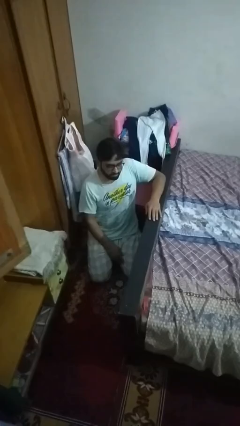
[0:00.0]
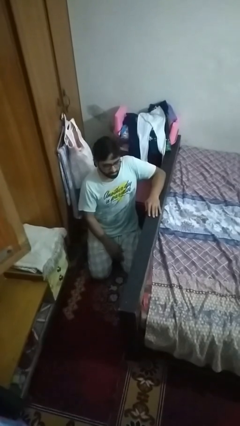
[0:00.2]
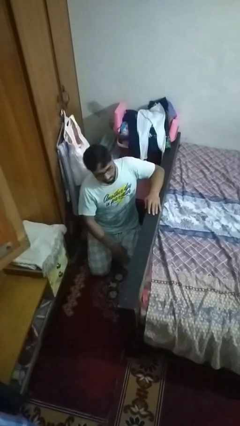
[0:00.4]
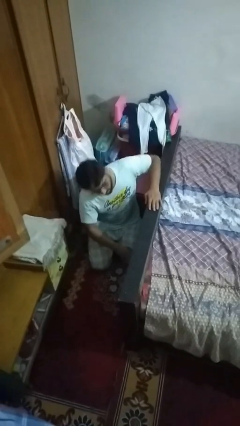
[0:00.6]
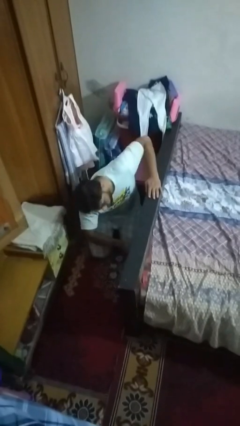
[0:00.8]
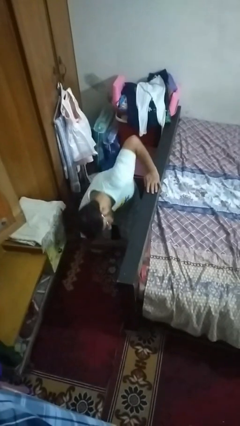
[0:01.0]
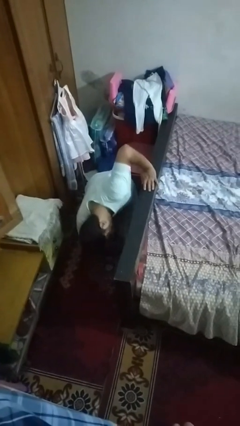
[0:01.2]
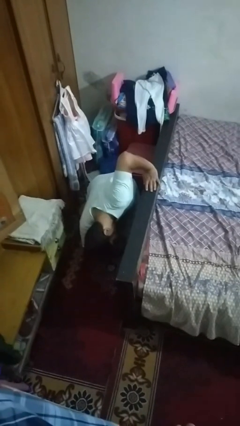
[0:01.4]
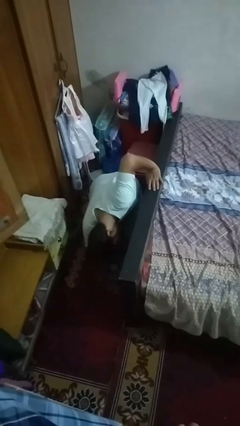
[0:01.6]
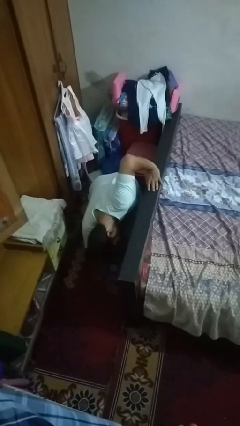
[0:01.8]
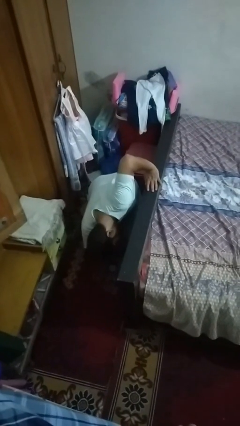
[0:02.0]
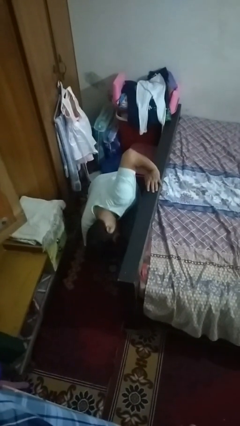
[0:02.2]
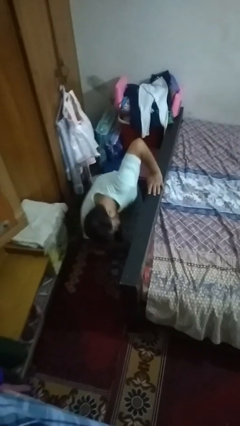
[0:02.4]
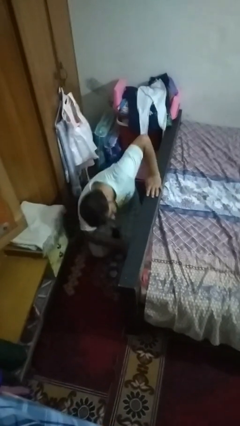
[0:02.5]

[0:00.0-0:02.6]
person searches under bed

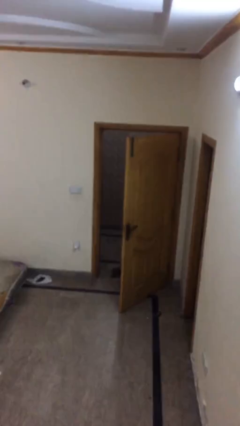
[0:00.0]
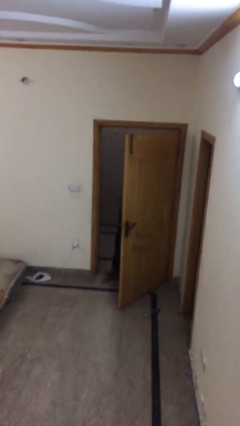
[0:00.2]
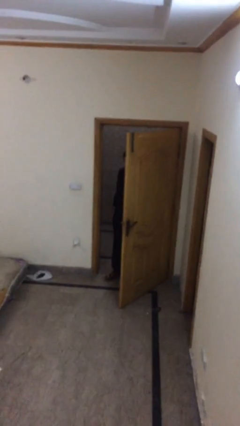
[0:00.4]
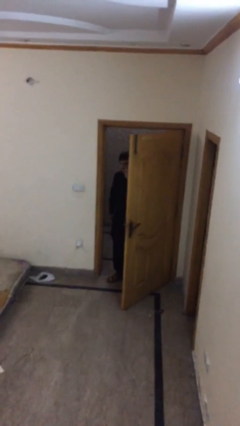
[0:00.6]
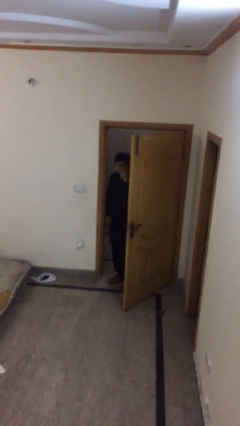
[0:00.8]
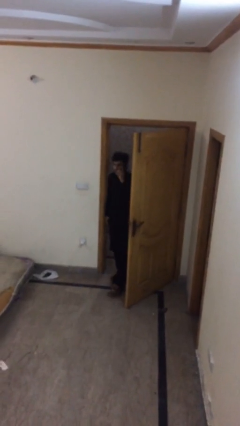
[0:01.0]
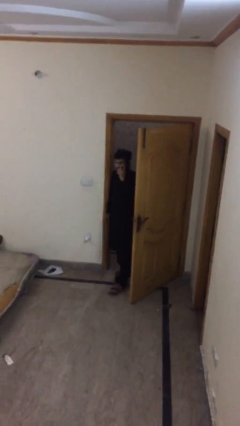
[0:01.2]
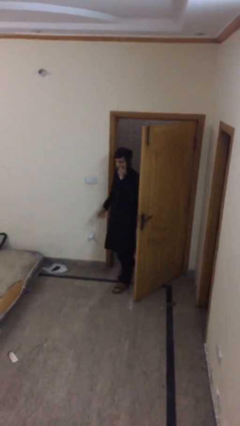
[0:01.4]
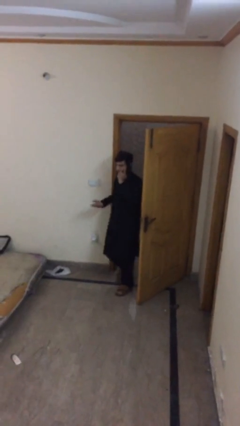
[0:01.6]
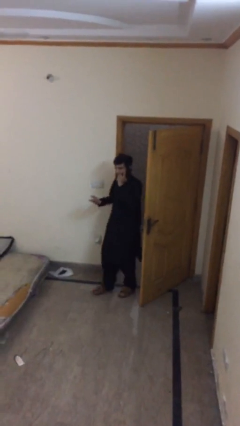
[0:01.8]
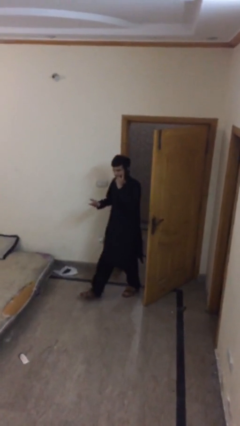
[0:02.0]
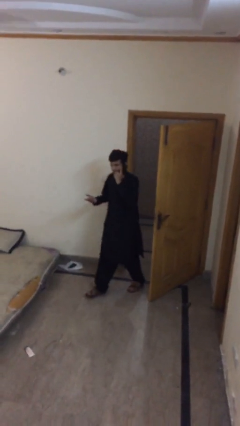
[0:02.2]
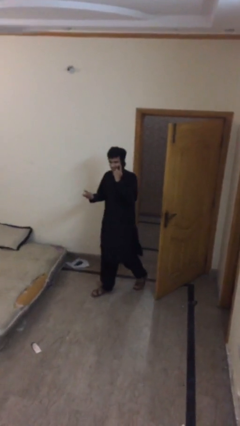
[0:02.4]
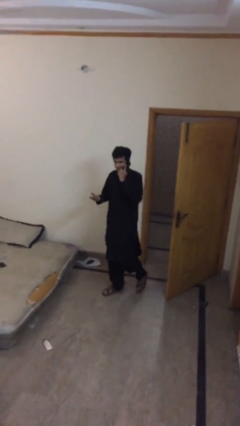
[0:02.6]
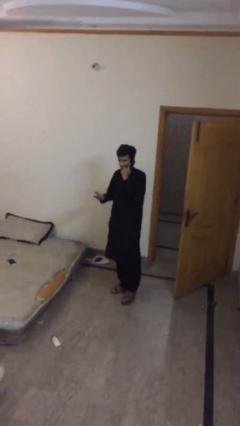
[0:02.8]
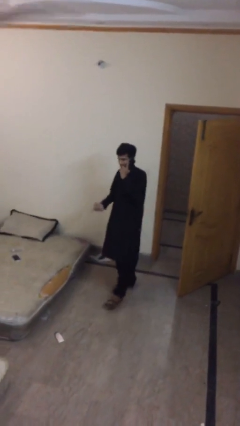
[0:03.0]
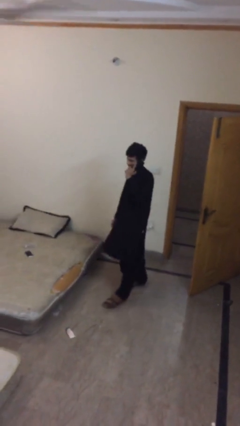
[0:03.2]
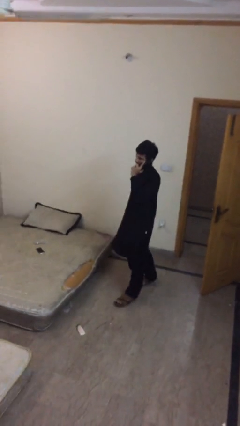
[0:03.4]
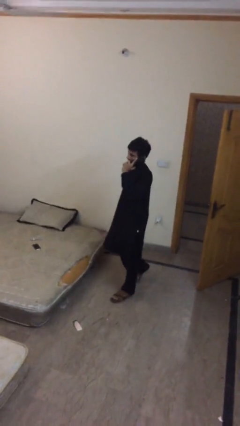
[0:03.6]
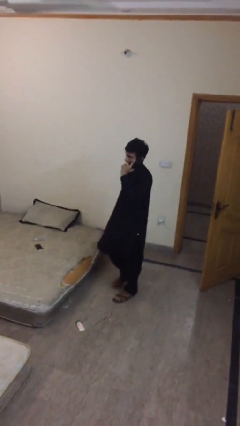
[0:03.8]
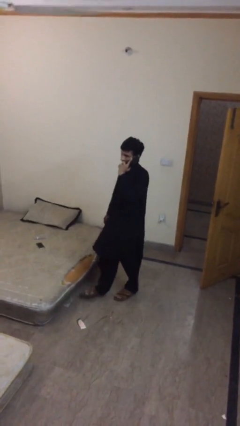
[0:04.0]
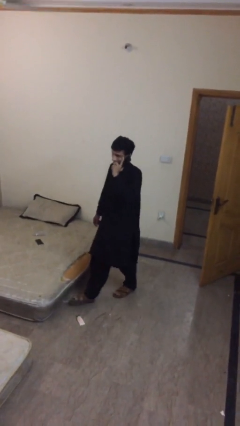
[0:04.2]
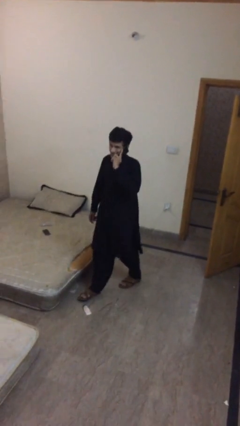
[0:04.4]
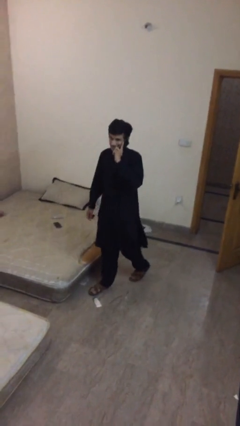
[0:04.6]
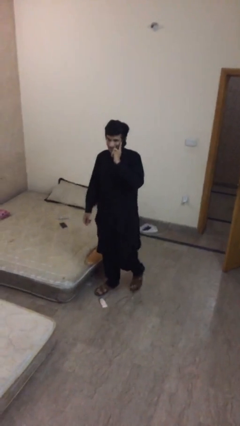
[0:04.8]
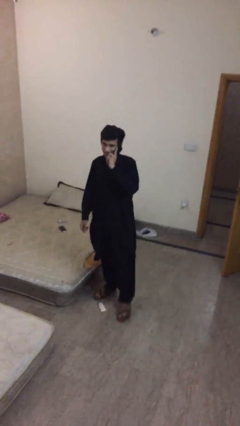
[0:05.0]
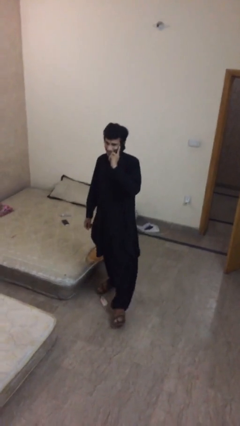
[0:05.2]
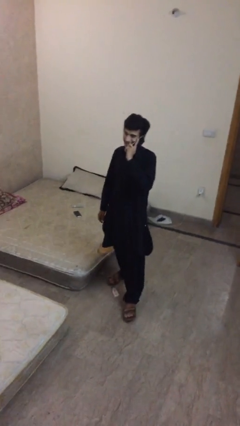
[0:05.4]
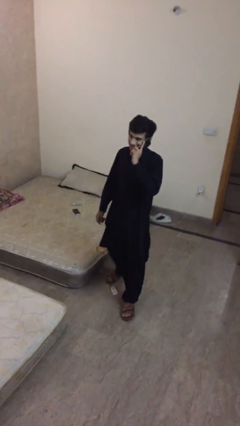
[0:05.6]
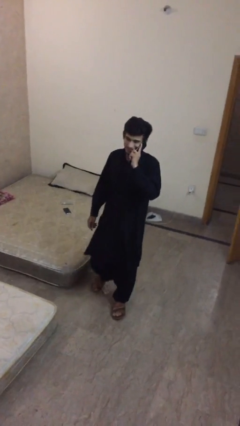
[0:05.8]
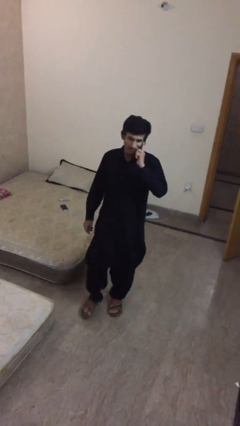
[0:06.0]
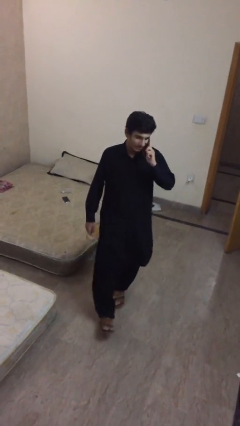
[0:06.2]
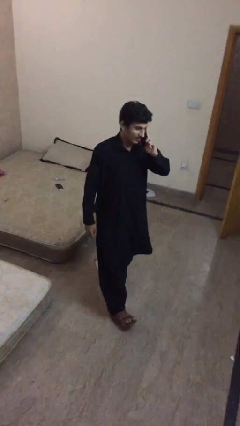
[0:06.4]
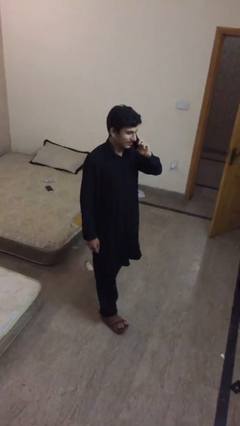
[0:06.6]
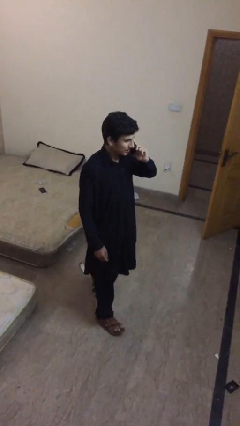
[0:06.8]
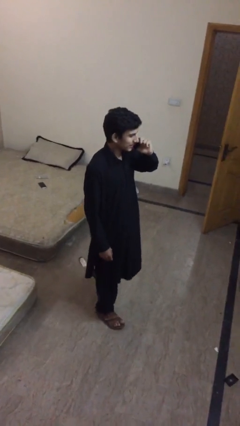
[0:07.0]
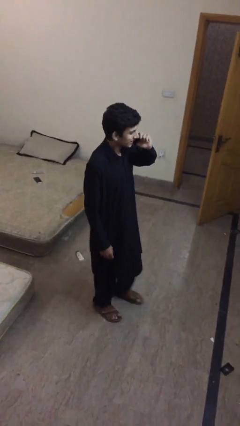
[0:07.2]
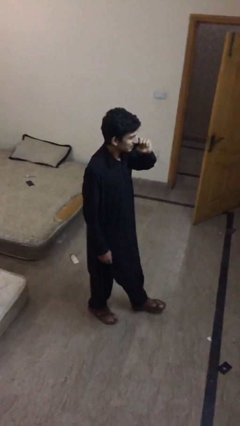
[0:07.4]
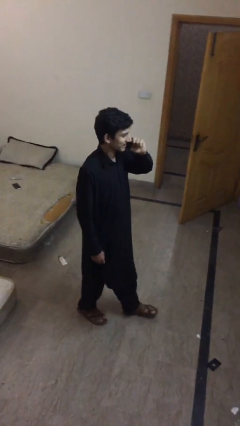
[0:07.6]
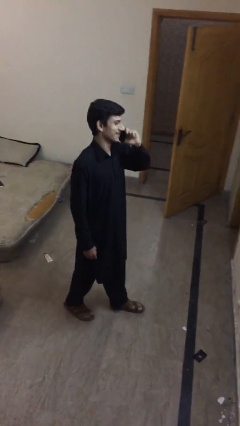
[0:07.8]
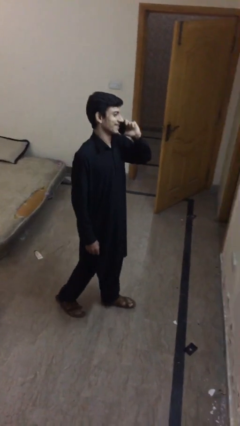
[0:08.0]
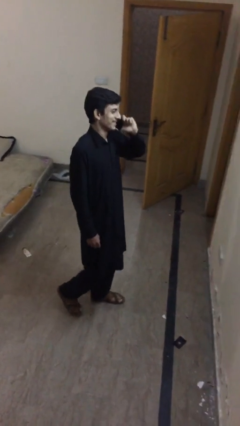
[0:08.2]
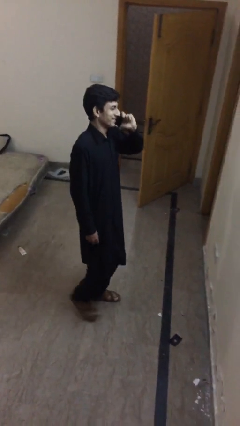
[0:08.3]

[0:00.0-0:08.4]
person enters scene through structure

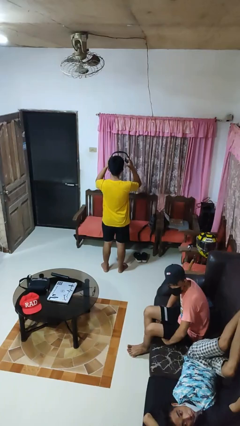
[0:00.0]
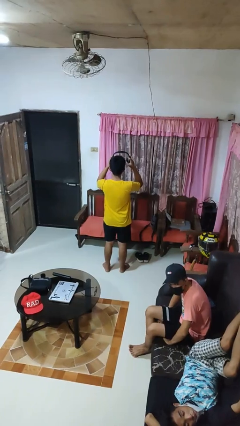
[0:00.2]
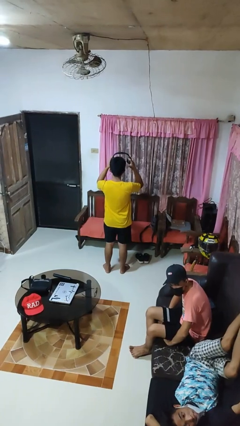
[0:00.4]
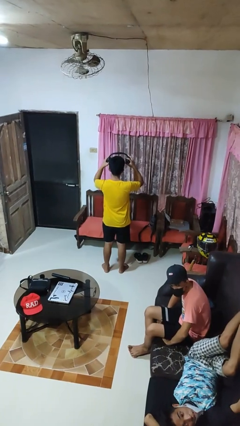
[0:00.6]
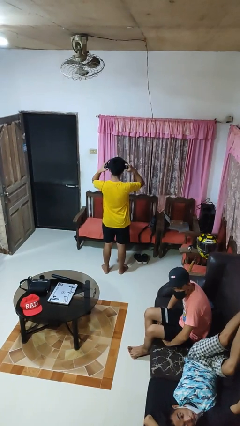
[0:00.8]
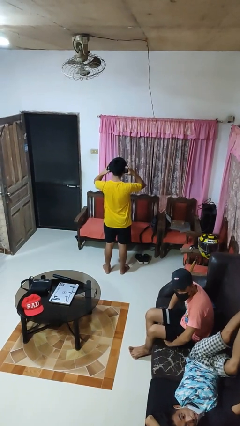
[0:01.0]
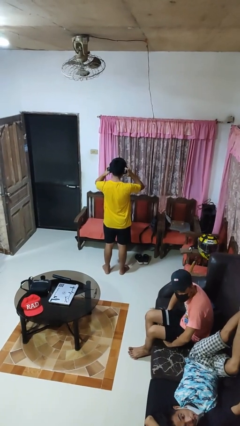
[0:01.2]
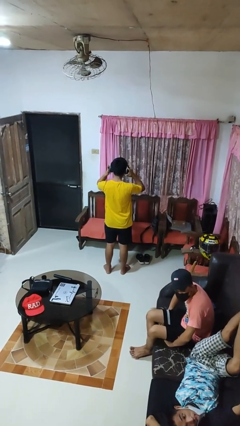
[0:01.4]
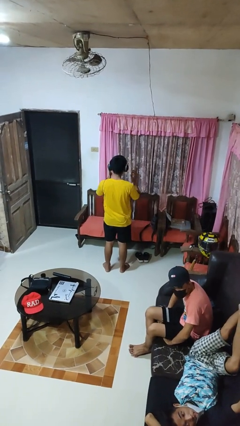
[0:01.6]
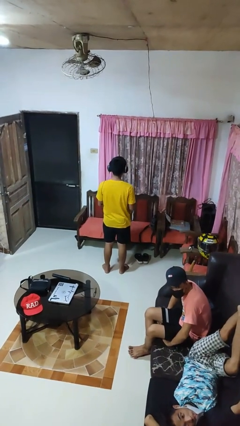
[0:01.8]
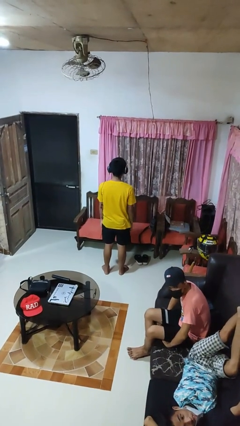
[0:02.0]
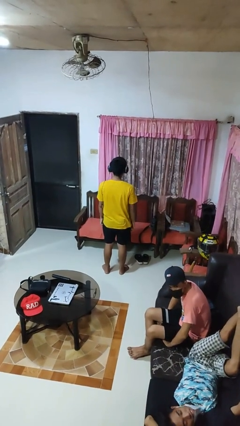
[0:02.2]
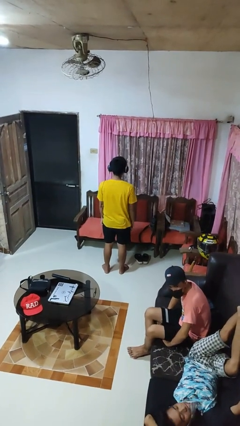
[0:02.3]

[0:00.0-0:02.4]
person puts on headphones

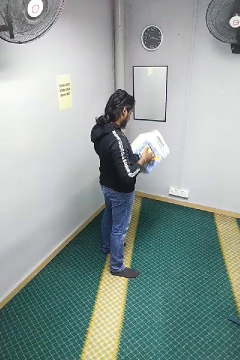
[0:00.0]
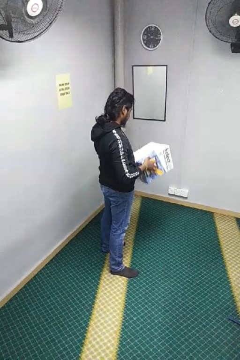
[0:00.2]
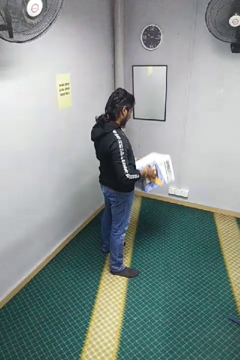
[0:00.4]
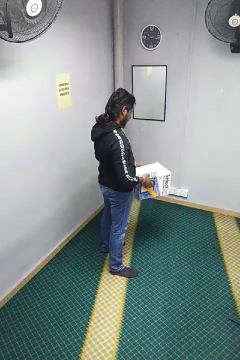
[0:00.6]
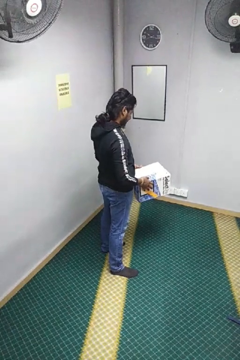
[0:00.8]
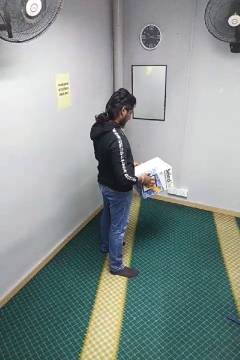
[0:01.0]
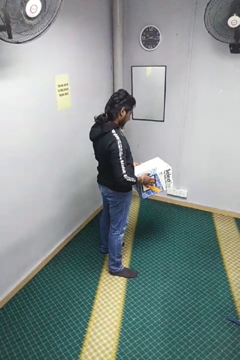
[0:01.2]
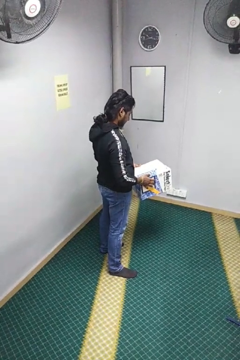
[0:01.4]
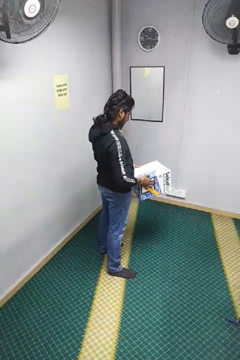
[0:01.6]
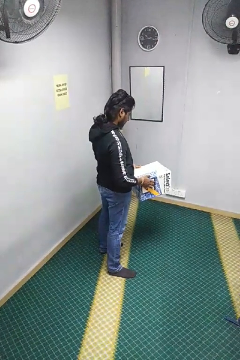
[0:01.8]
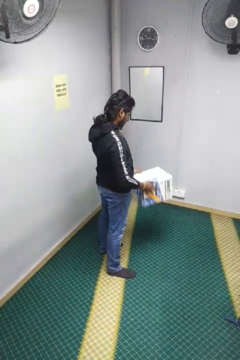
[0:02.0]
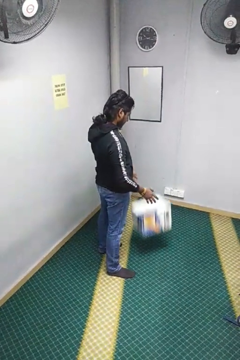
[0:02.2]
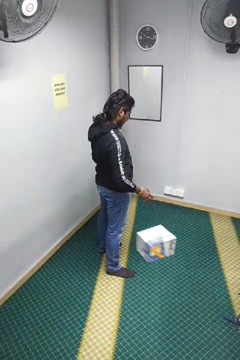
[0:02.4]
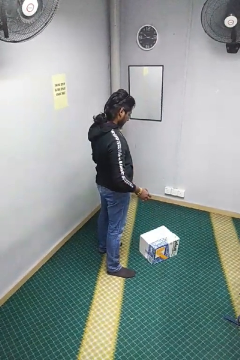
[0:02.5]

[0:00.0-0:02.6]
person drops object

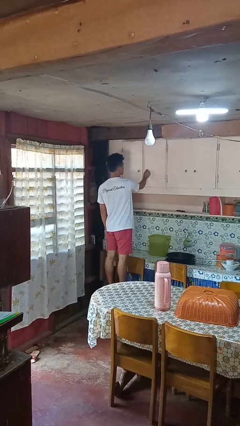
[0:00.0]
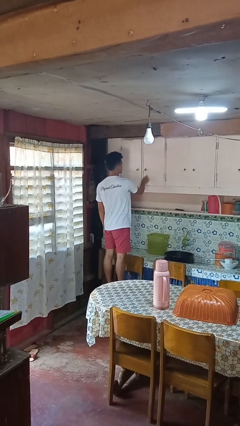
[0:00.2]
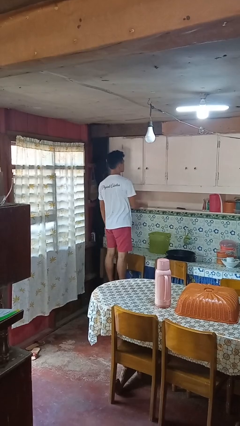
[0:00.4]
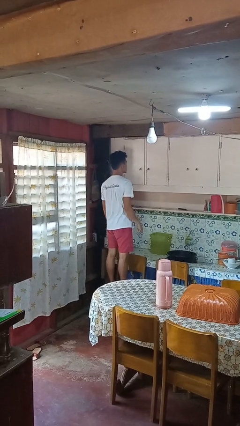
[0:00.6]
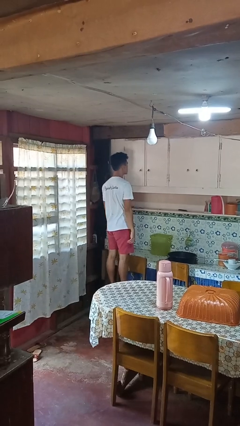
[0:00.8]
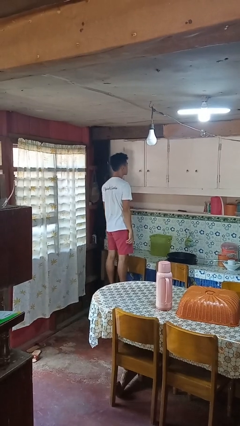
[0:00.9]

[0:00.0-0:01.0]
person closes cabinet

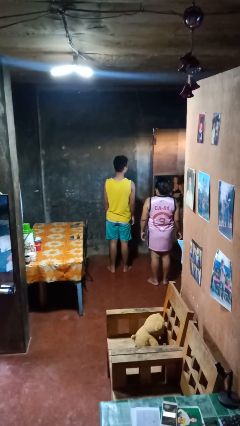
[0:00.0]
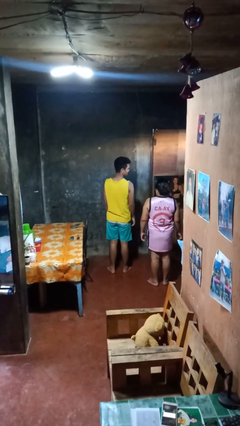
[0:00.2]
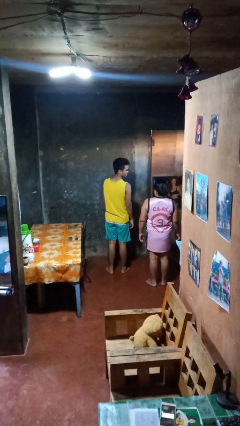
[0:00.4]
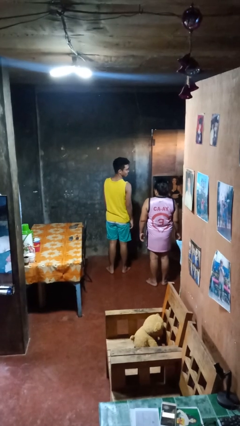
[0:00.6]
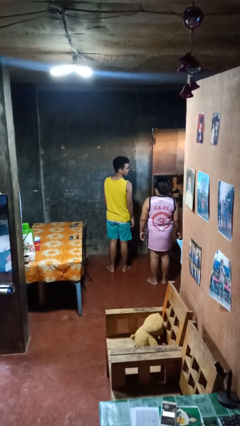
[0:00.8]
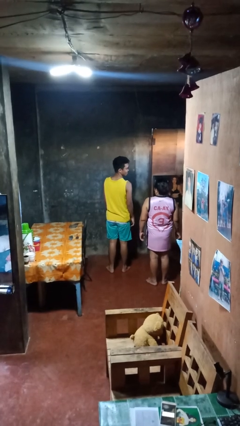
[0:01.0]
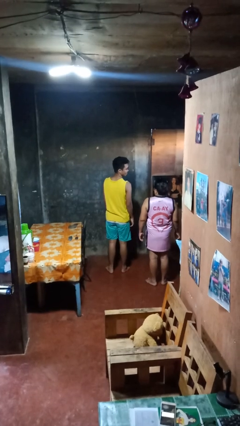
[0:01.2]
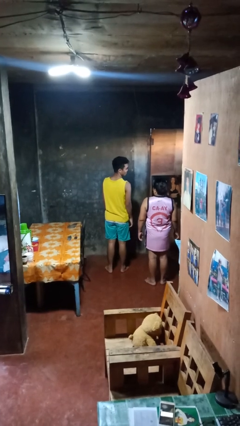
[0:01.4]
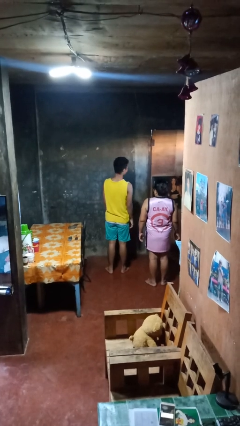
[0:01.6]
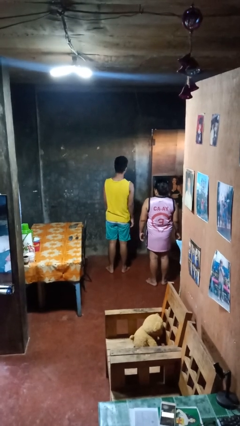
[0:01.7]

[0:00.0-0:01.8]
person looks over shoulder
